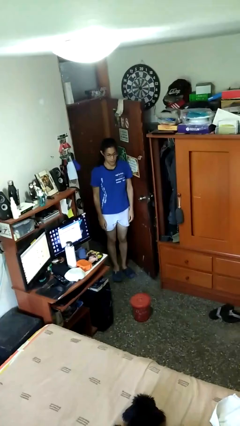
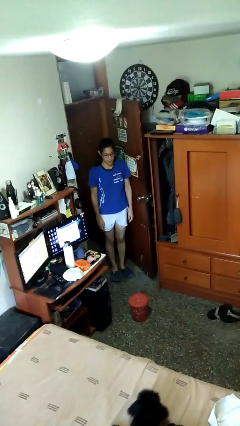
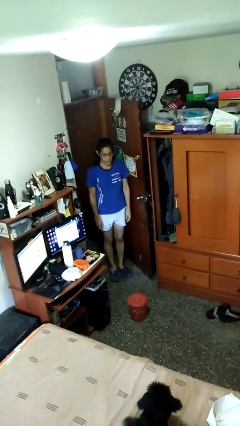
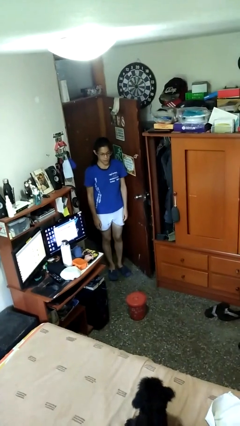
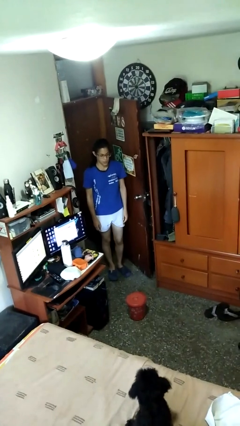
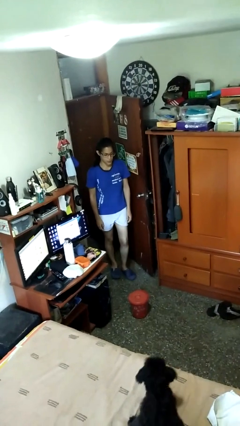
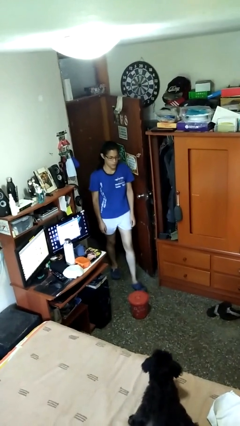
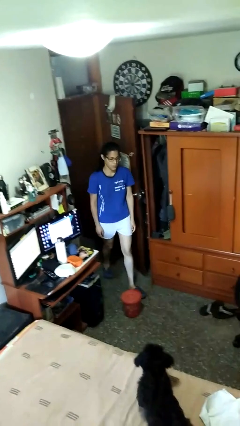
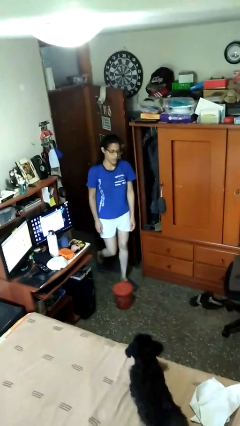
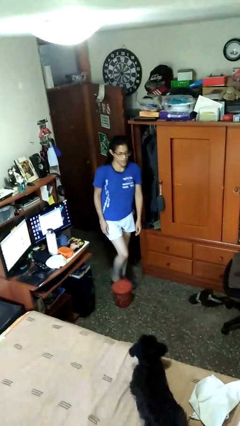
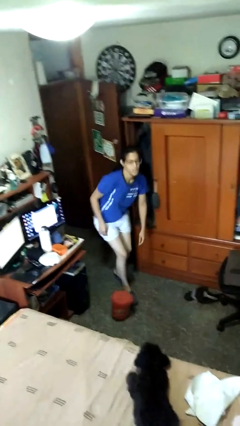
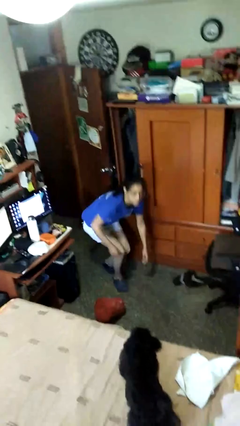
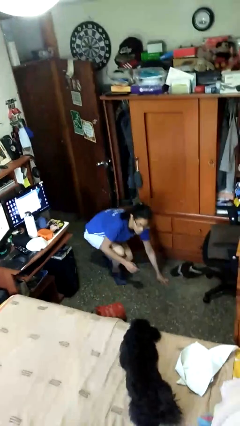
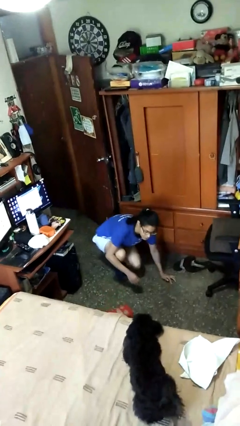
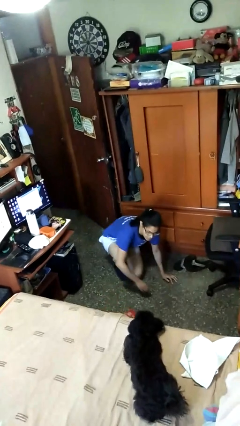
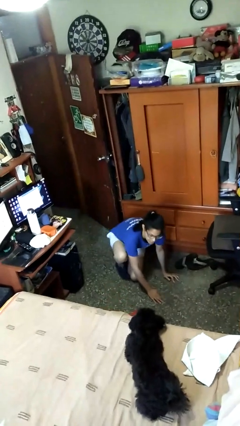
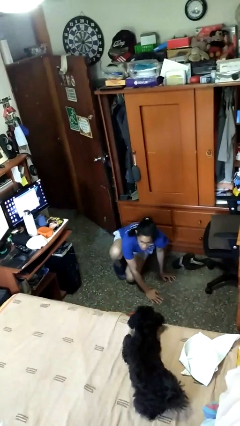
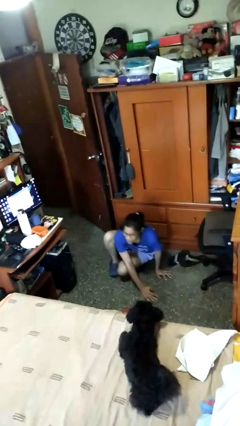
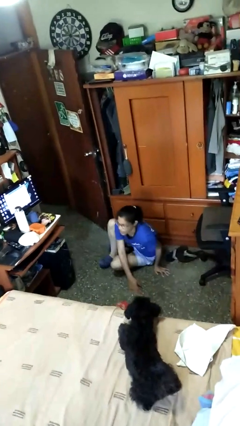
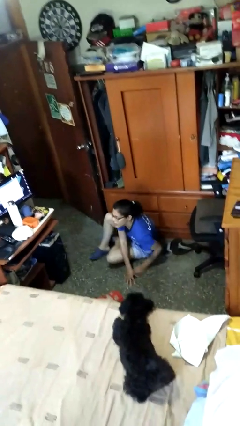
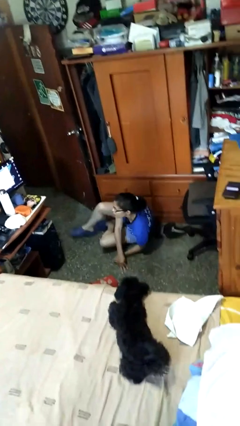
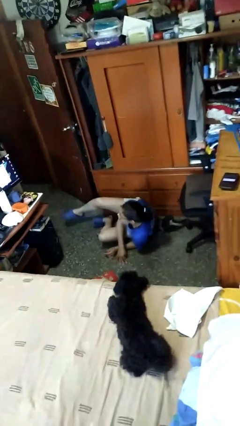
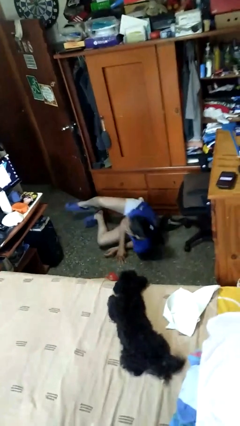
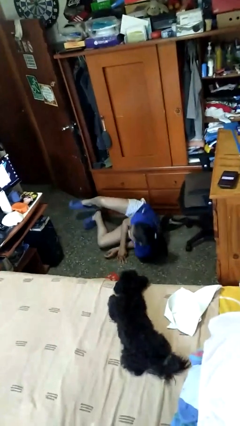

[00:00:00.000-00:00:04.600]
person trips on object on floor

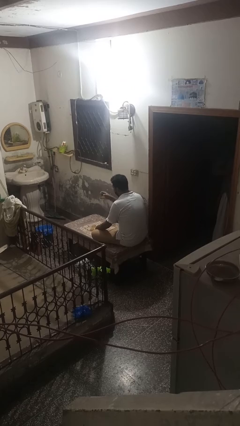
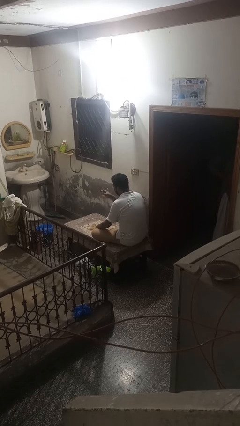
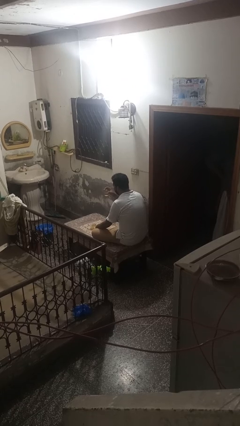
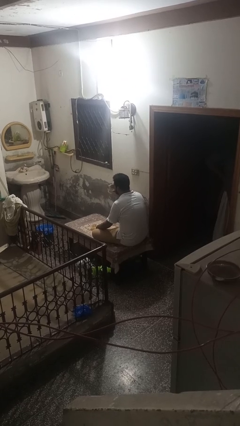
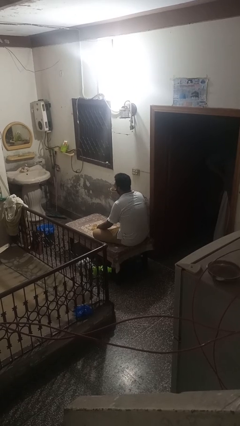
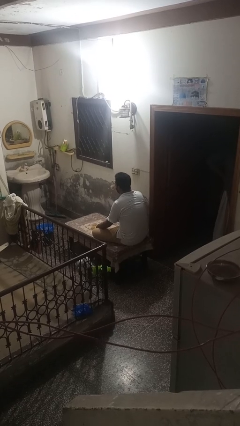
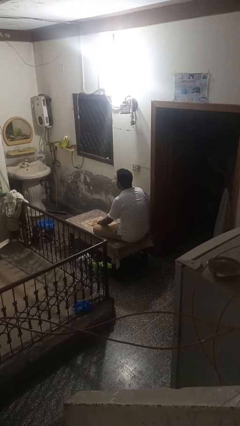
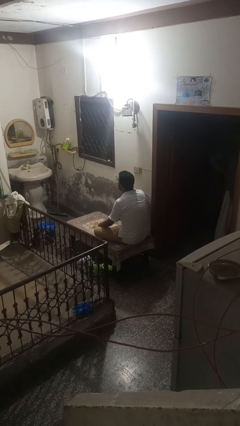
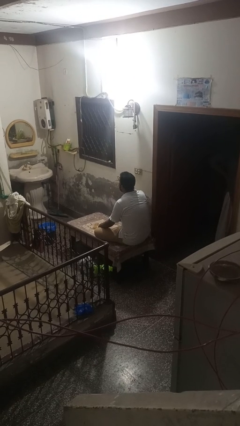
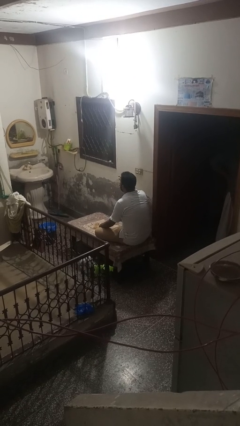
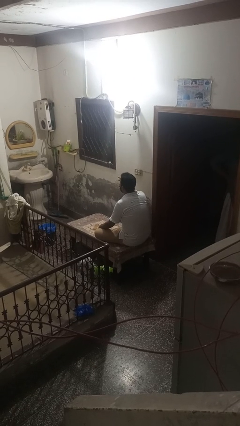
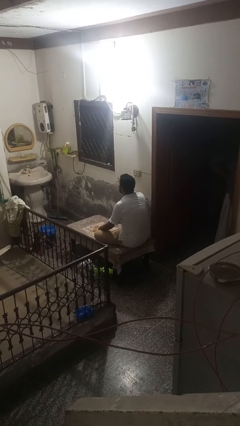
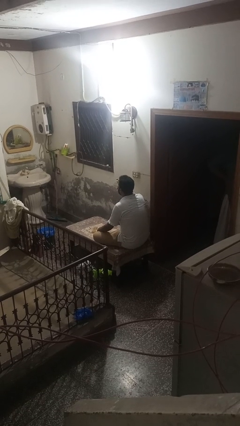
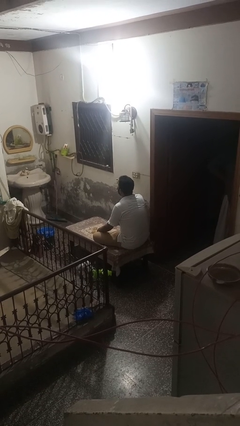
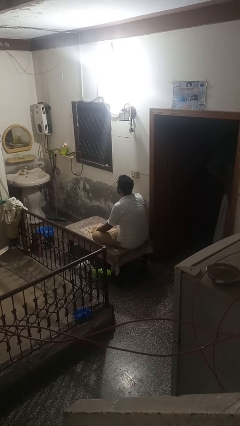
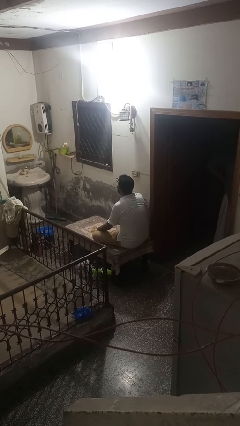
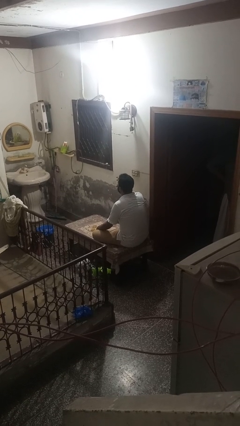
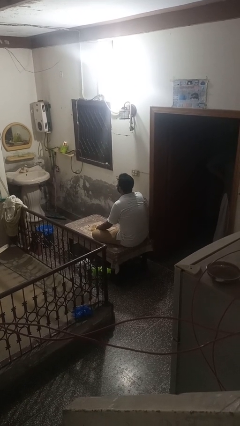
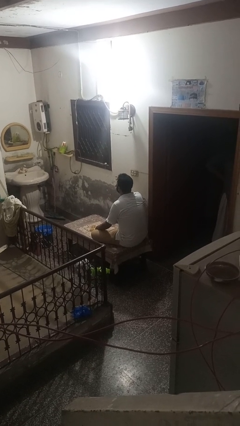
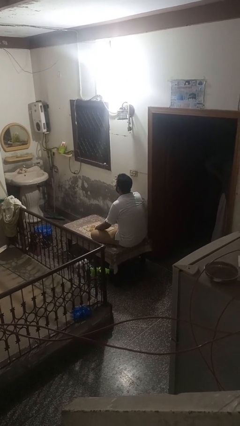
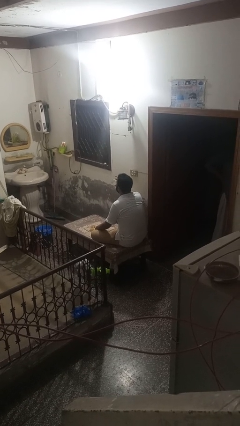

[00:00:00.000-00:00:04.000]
person drinks from shotglass

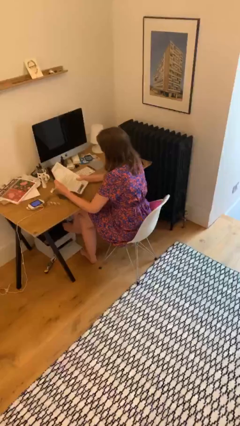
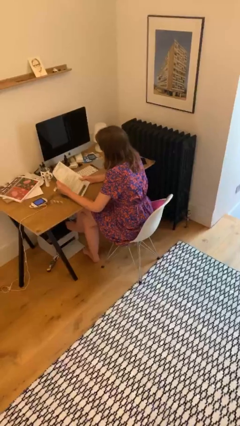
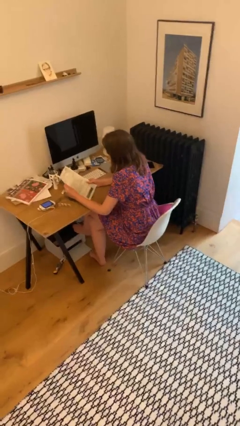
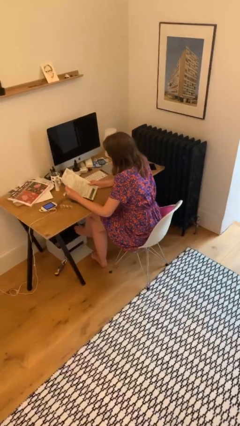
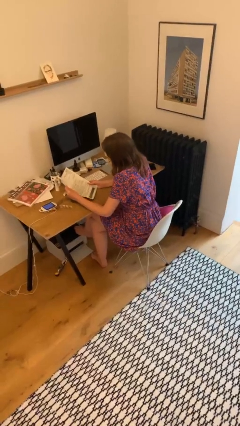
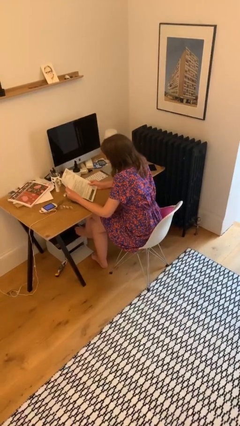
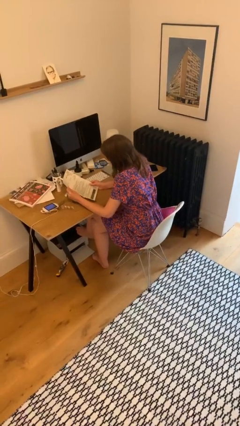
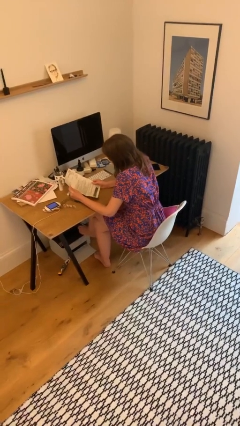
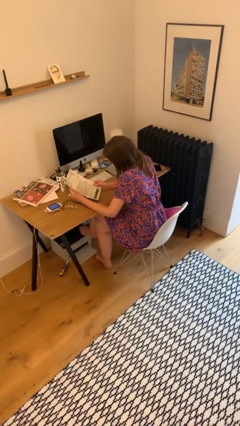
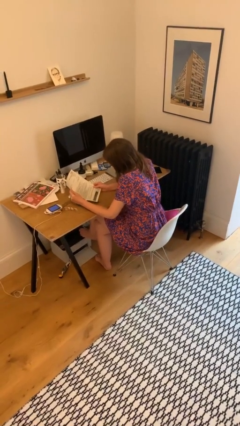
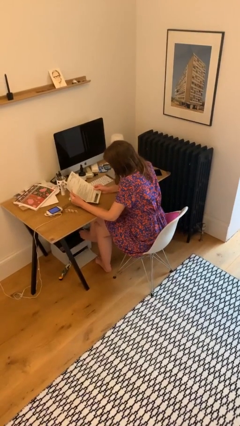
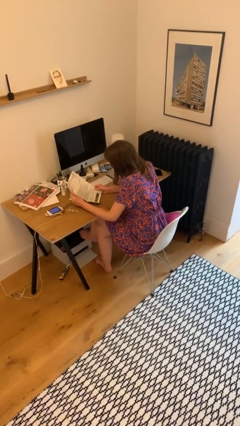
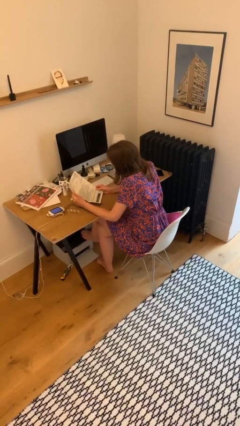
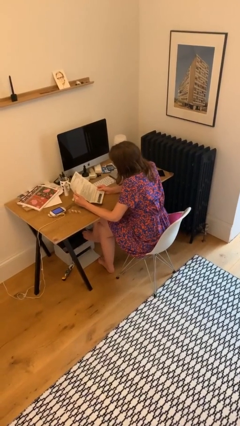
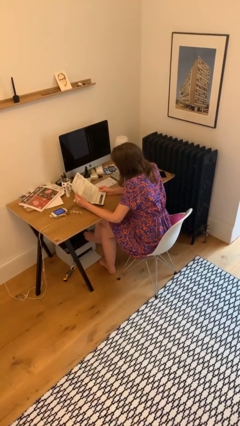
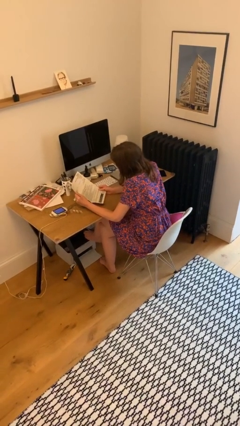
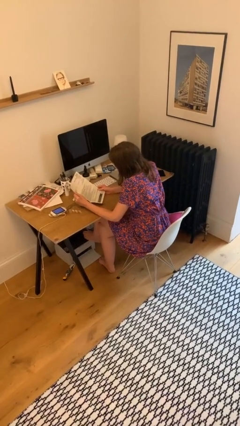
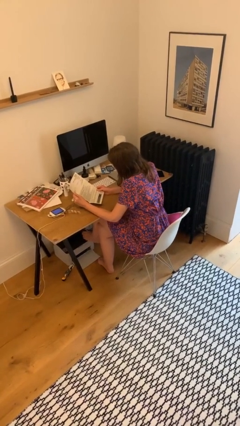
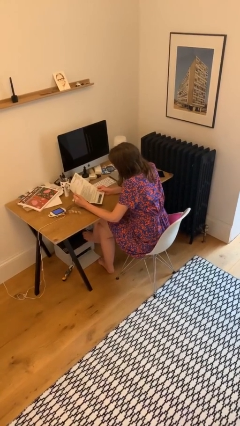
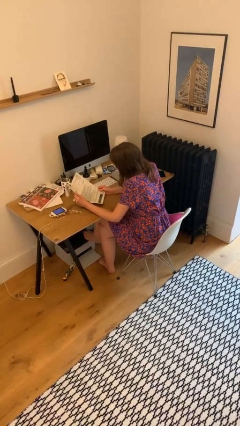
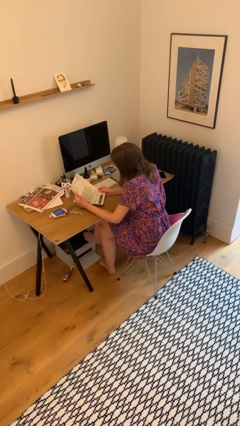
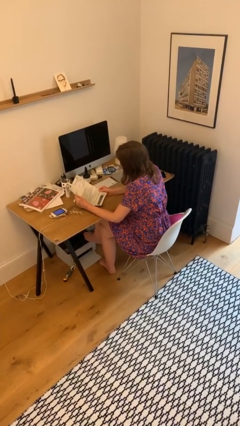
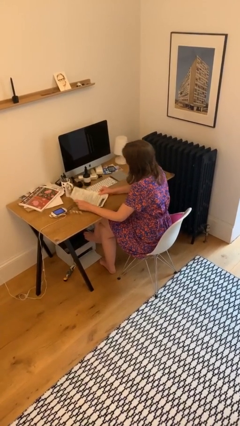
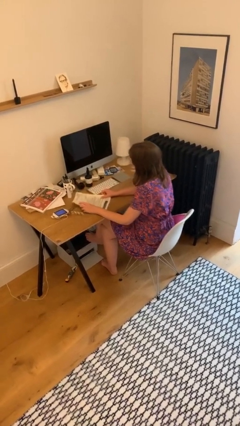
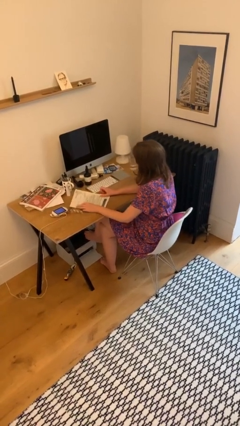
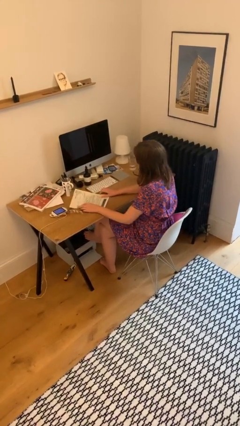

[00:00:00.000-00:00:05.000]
person reads document

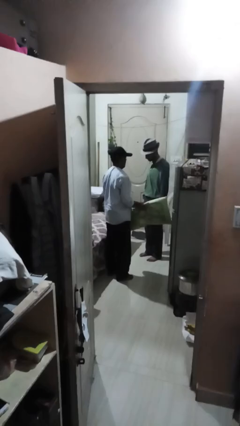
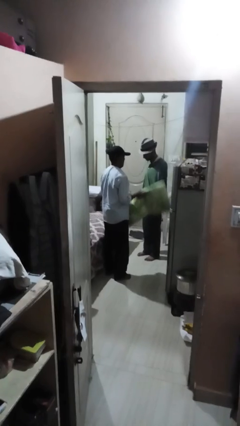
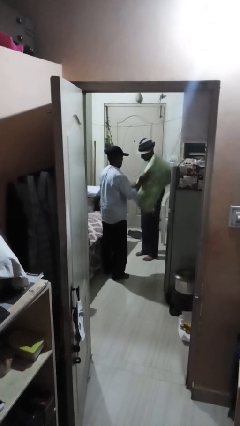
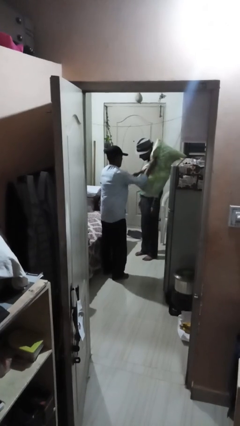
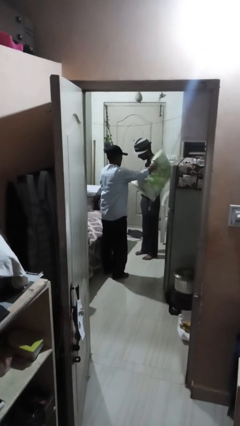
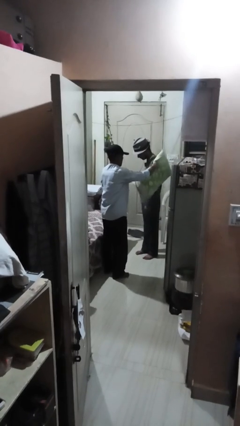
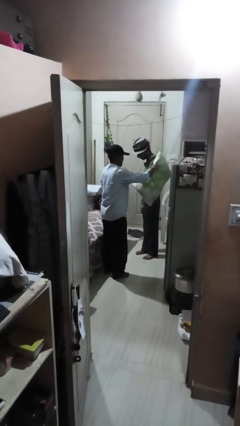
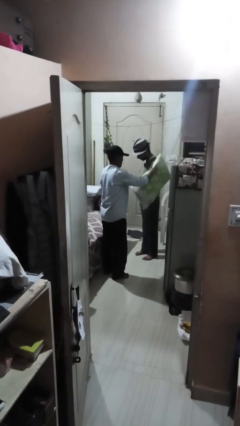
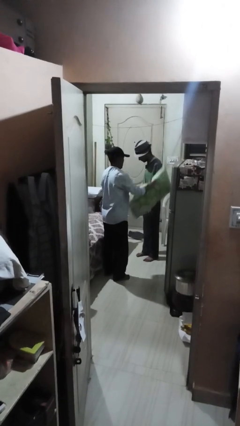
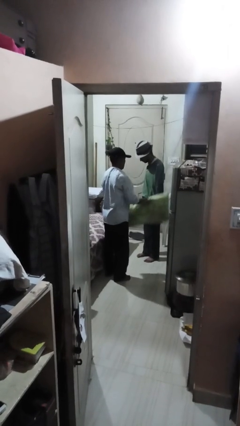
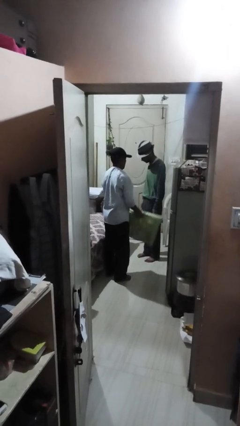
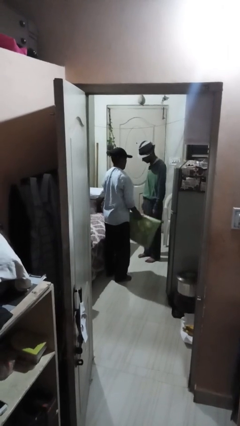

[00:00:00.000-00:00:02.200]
person hits person with pillow

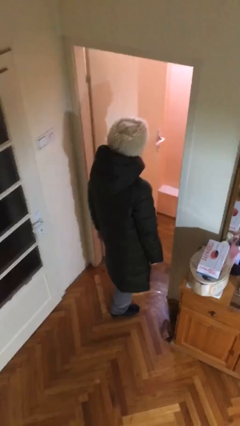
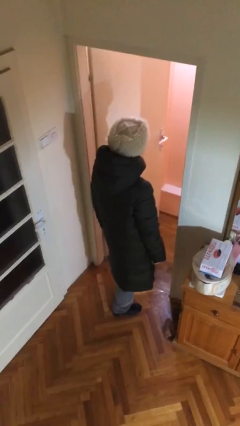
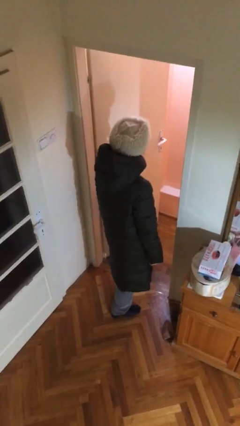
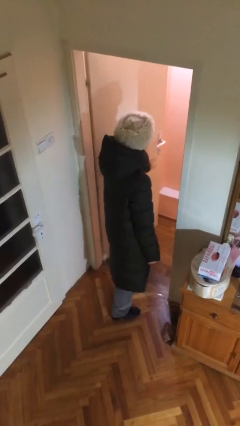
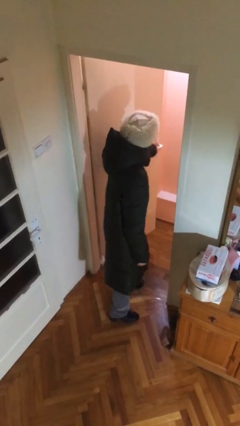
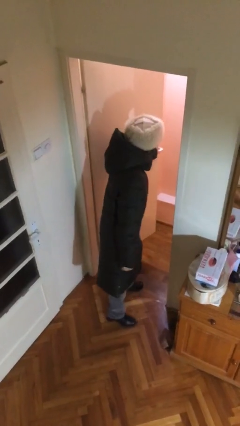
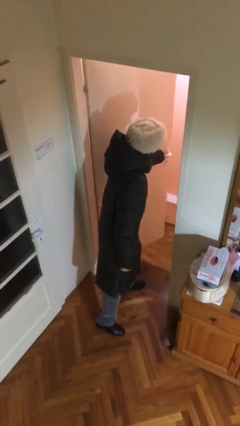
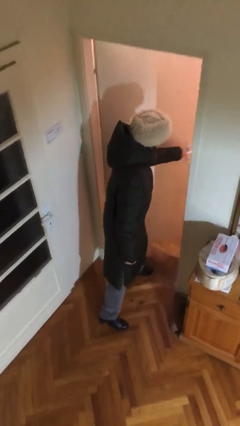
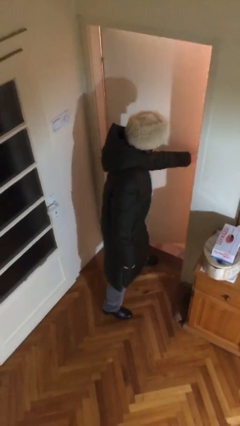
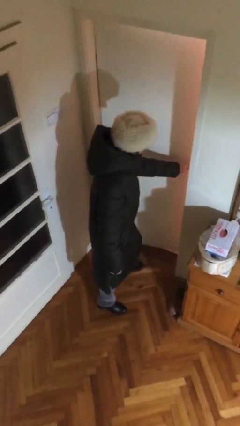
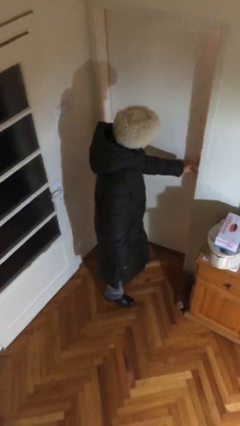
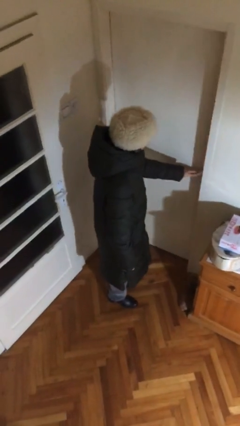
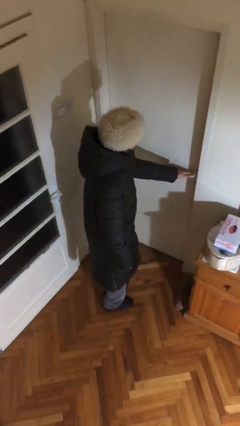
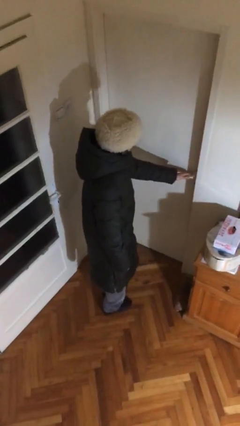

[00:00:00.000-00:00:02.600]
person closes facility door
